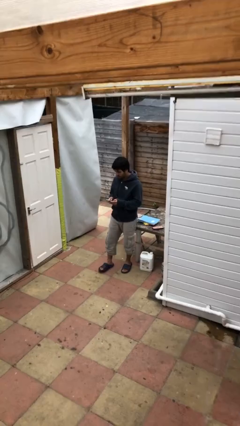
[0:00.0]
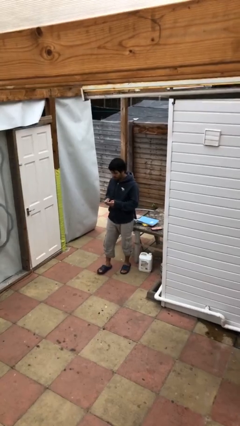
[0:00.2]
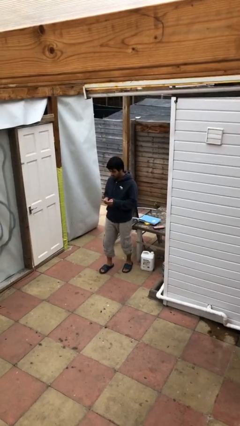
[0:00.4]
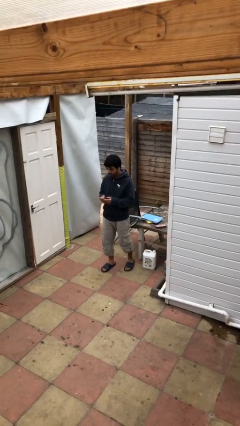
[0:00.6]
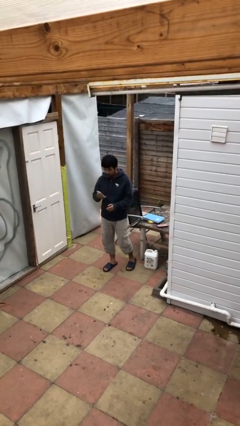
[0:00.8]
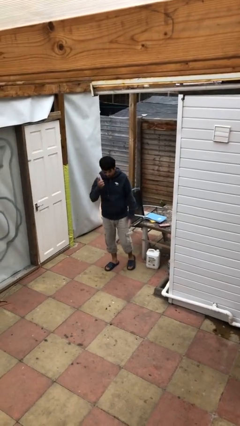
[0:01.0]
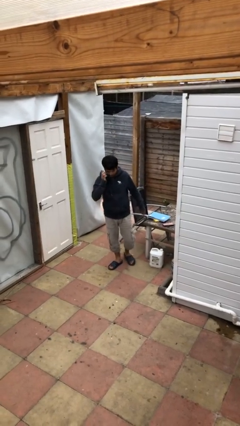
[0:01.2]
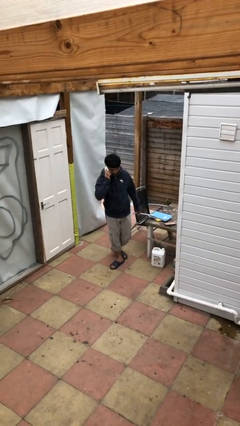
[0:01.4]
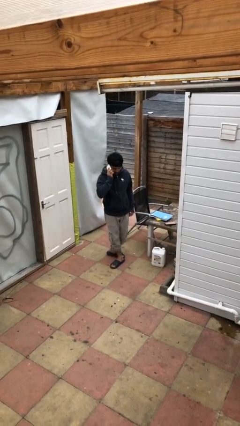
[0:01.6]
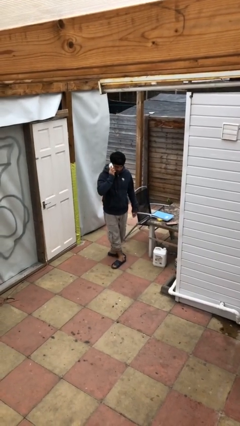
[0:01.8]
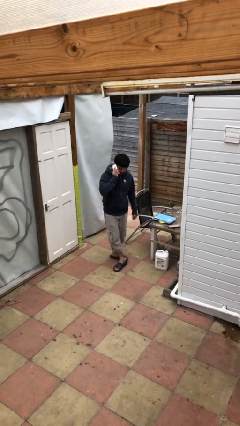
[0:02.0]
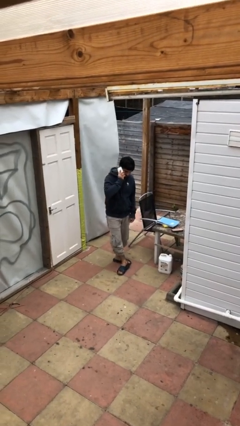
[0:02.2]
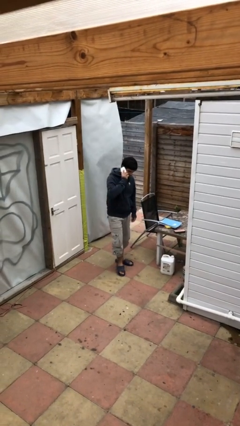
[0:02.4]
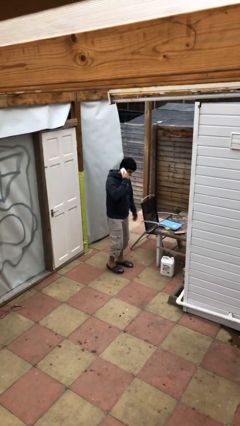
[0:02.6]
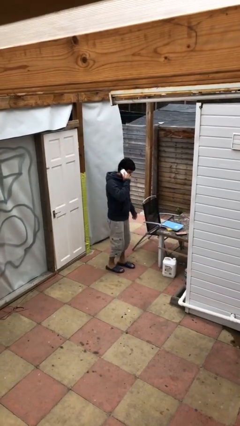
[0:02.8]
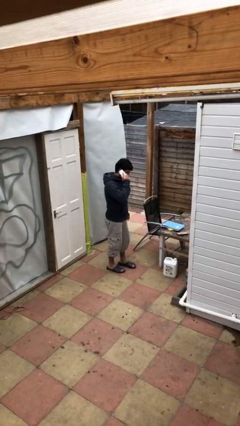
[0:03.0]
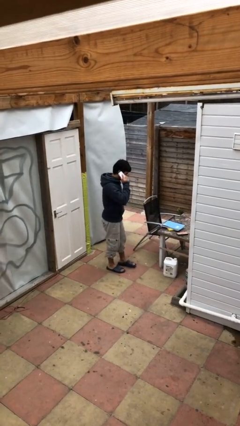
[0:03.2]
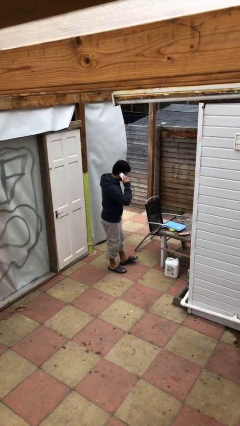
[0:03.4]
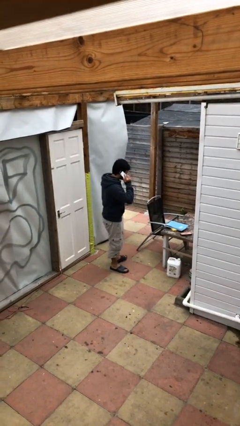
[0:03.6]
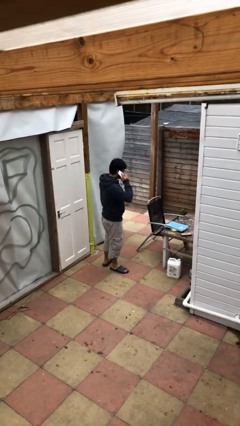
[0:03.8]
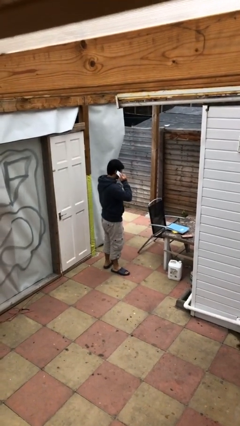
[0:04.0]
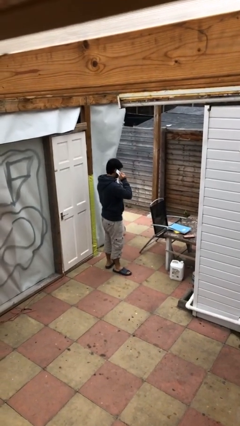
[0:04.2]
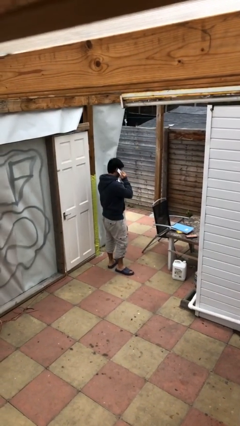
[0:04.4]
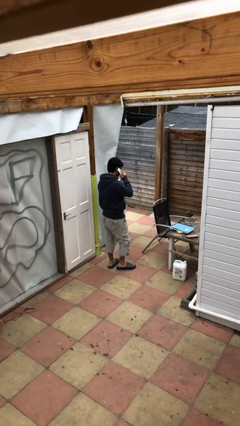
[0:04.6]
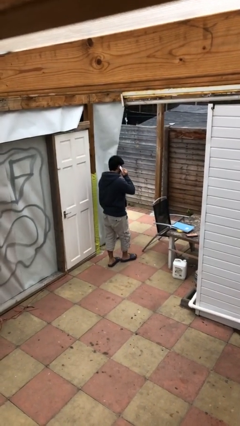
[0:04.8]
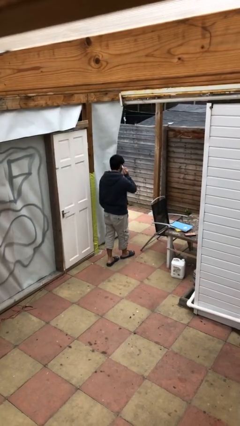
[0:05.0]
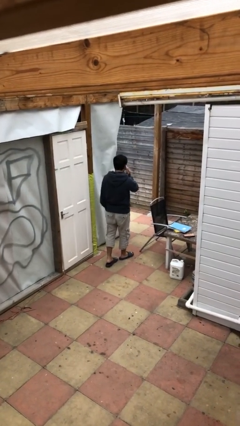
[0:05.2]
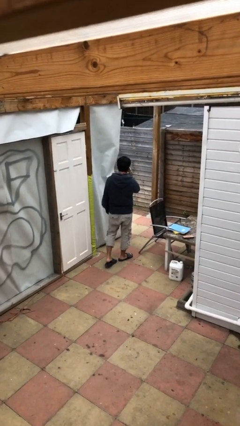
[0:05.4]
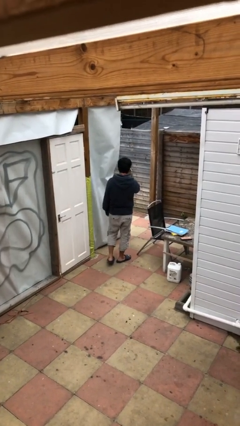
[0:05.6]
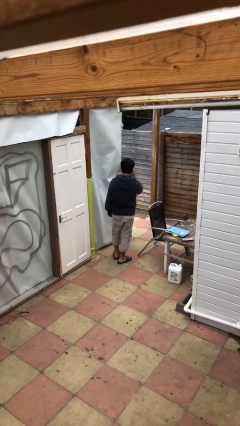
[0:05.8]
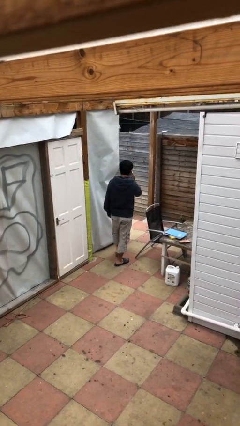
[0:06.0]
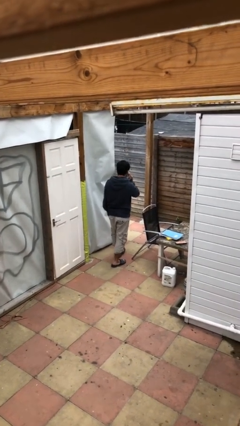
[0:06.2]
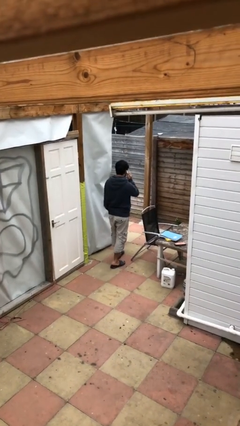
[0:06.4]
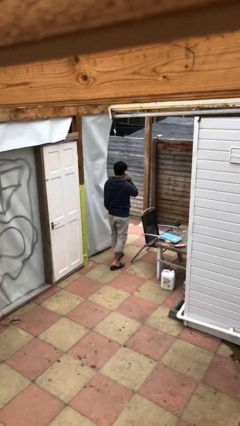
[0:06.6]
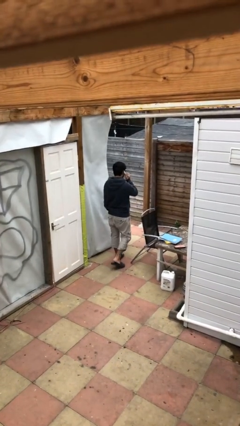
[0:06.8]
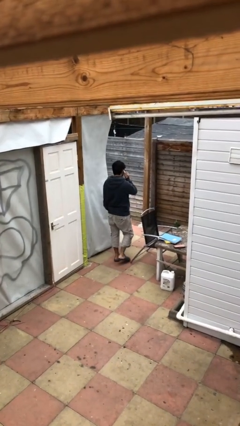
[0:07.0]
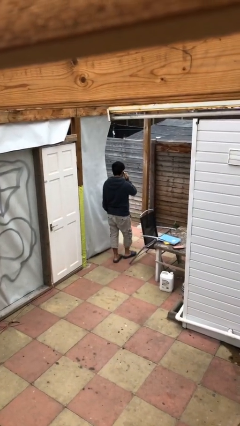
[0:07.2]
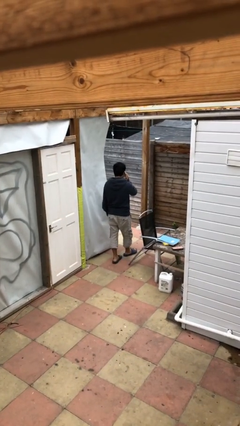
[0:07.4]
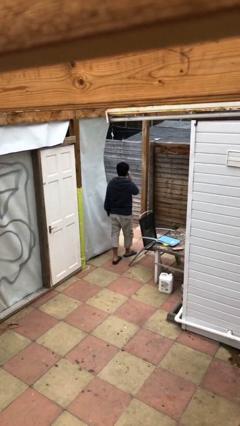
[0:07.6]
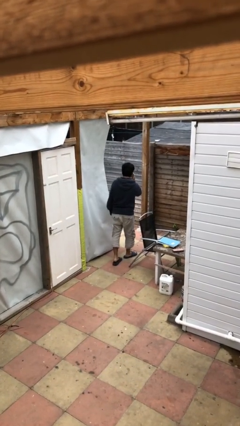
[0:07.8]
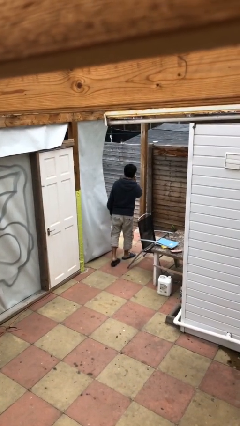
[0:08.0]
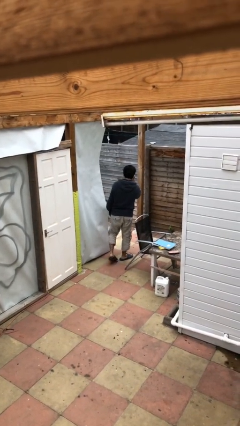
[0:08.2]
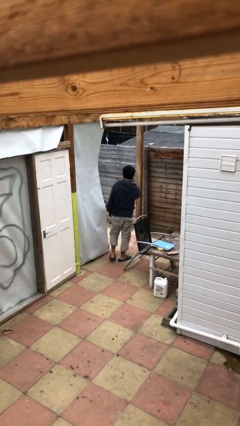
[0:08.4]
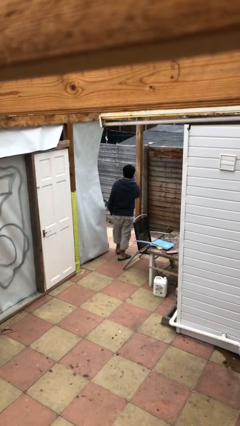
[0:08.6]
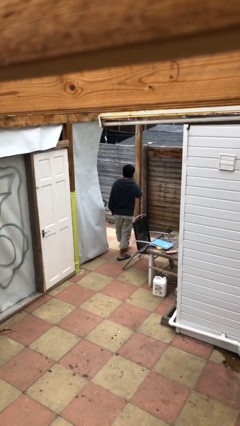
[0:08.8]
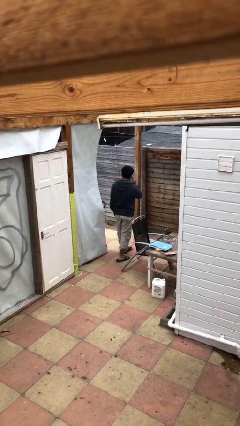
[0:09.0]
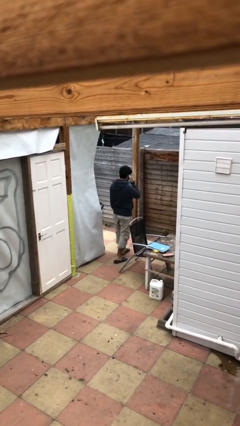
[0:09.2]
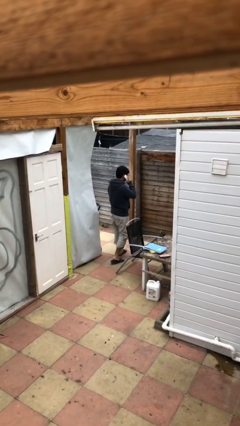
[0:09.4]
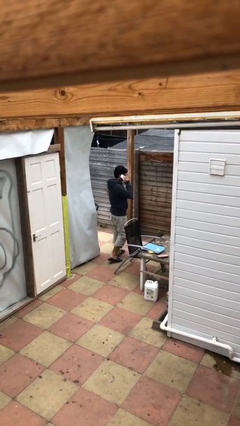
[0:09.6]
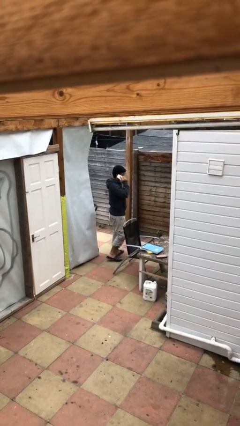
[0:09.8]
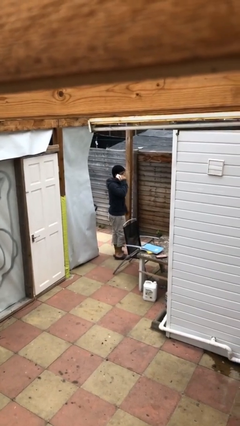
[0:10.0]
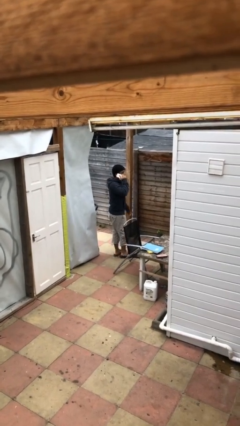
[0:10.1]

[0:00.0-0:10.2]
person talks on phone

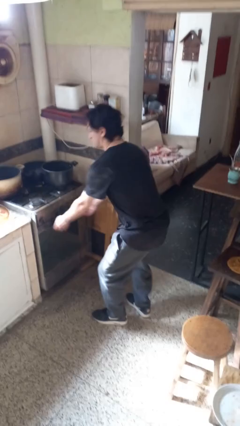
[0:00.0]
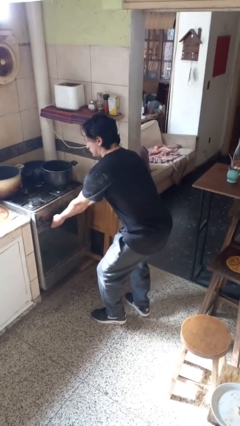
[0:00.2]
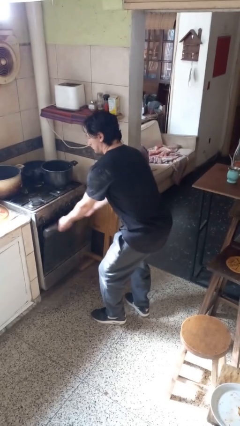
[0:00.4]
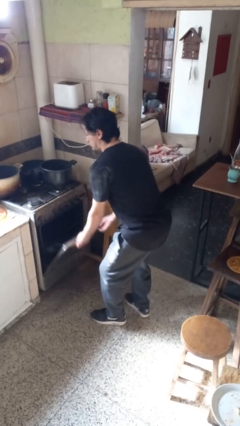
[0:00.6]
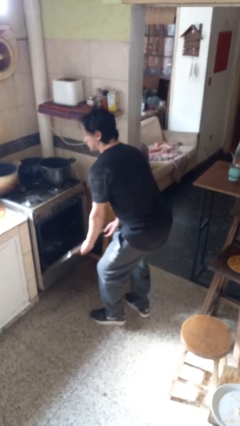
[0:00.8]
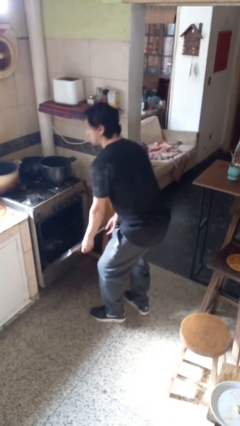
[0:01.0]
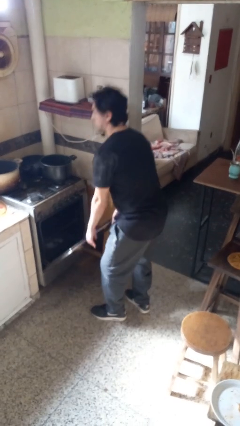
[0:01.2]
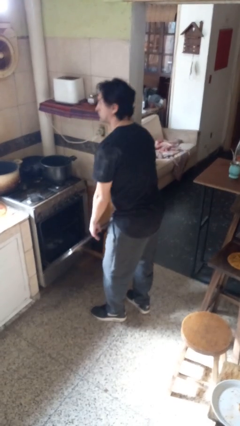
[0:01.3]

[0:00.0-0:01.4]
person opens oven door

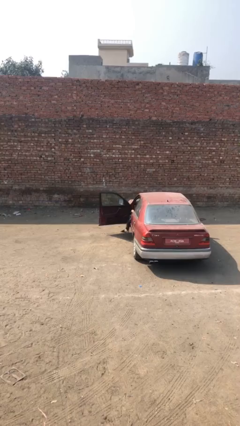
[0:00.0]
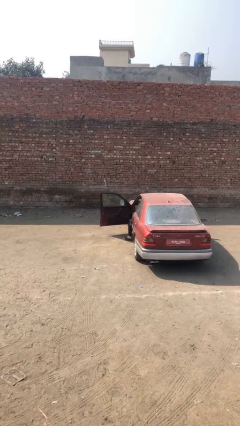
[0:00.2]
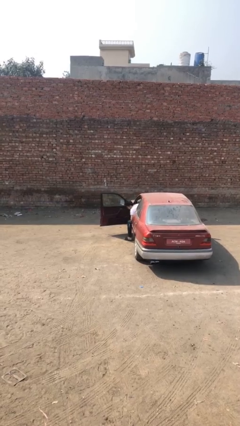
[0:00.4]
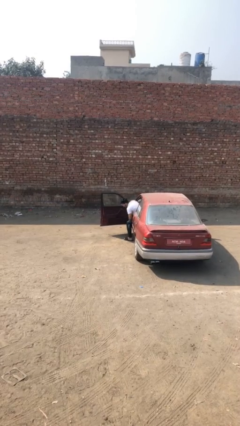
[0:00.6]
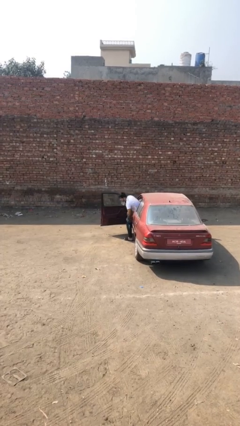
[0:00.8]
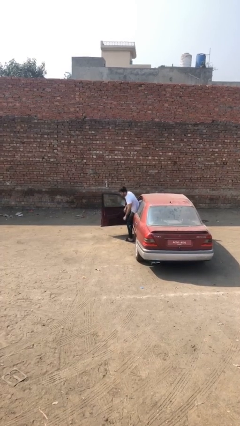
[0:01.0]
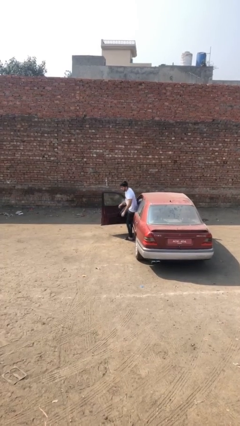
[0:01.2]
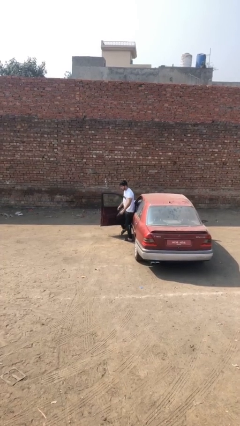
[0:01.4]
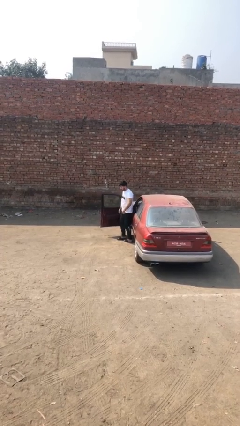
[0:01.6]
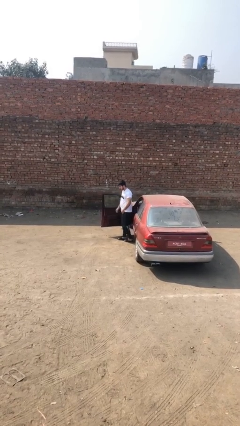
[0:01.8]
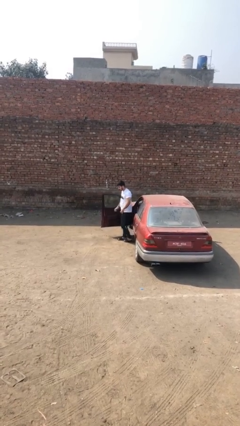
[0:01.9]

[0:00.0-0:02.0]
person exits car

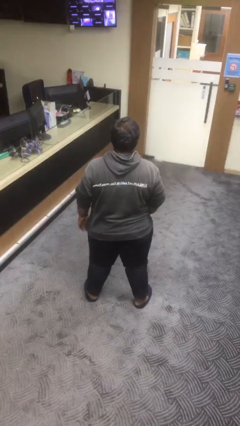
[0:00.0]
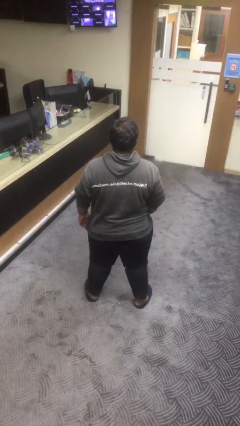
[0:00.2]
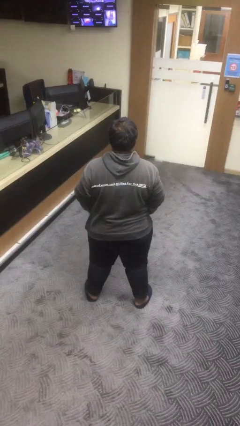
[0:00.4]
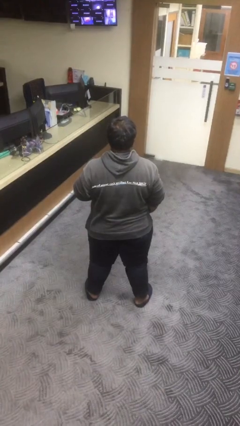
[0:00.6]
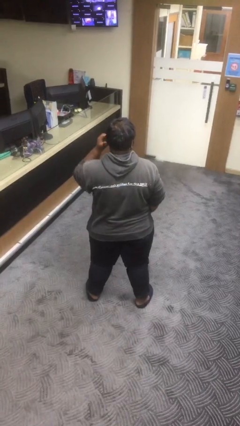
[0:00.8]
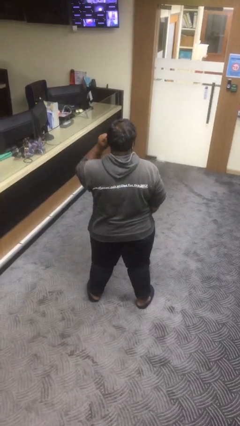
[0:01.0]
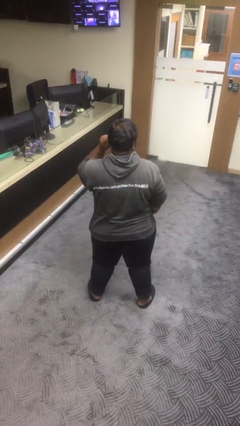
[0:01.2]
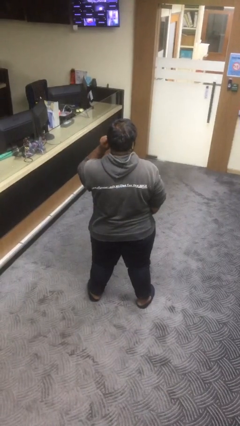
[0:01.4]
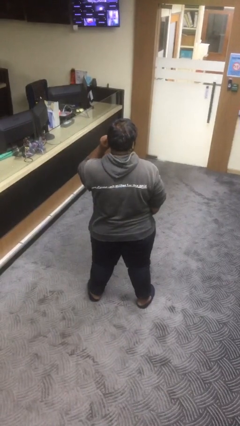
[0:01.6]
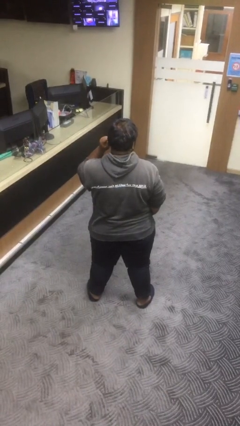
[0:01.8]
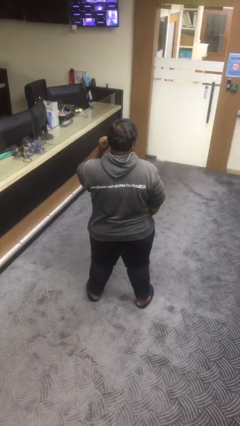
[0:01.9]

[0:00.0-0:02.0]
person touches earlobe

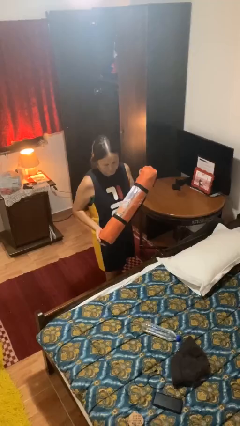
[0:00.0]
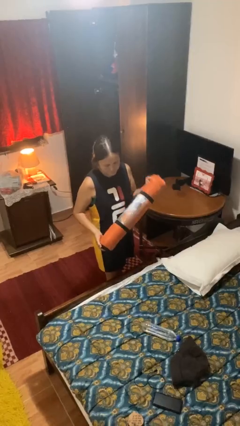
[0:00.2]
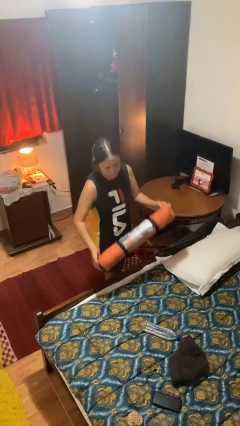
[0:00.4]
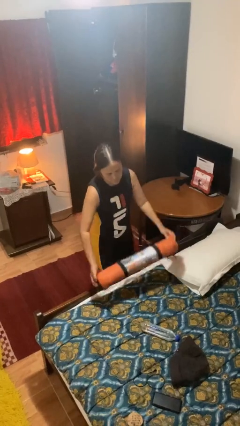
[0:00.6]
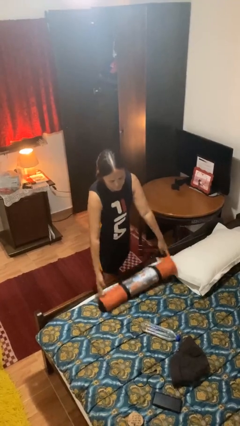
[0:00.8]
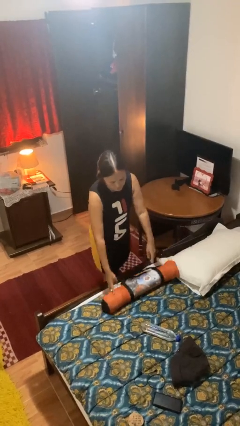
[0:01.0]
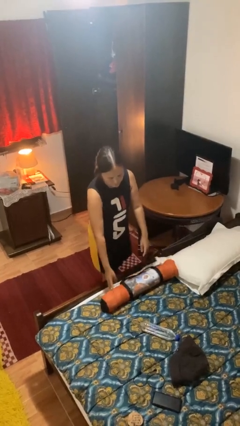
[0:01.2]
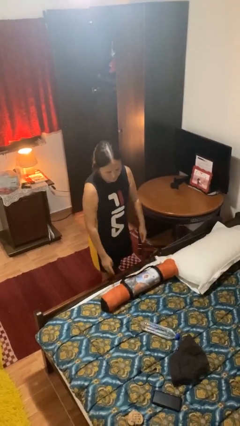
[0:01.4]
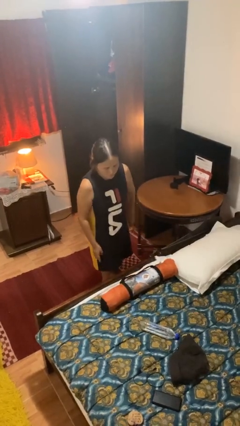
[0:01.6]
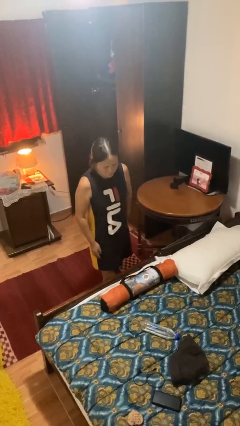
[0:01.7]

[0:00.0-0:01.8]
person puts down object on bed

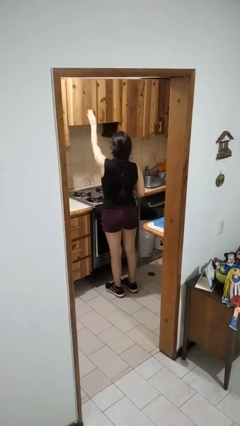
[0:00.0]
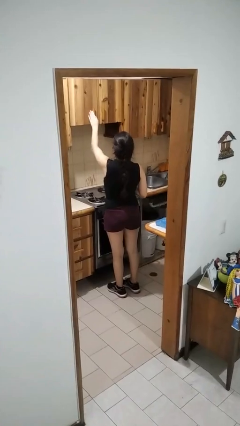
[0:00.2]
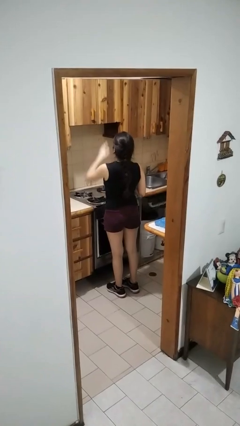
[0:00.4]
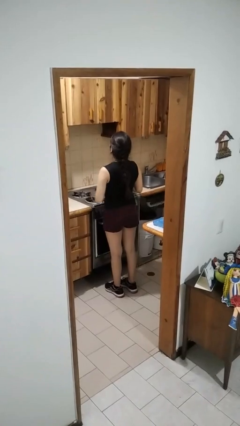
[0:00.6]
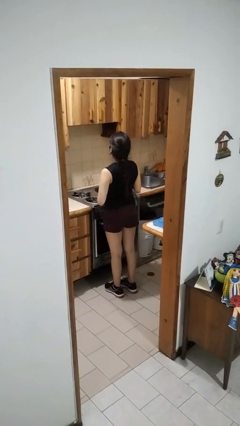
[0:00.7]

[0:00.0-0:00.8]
person closes cabinet
